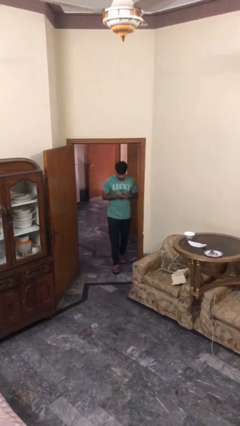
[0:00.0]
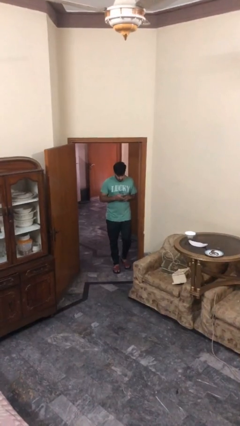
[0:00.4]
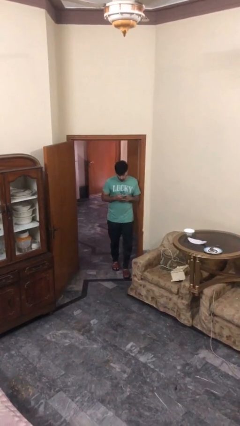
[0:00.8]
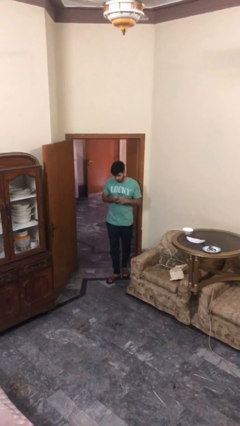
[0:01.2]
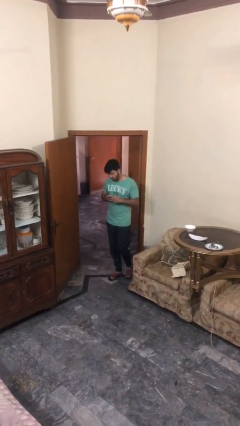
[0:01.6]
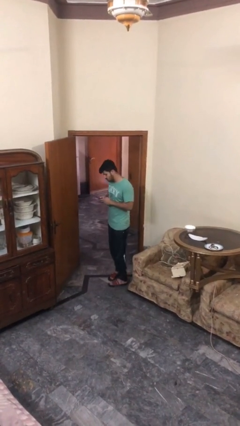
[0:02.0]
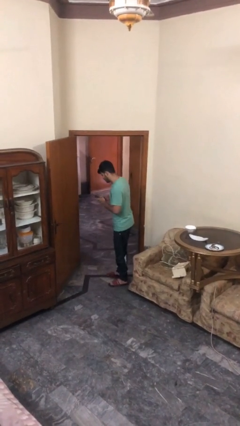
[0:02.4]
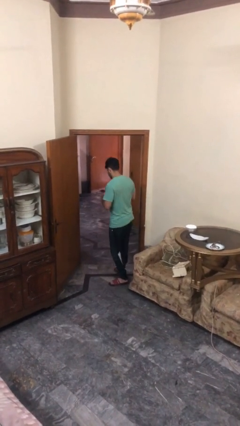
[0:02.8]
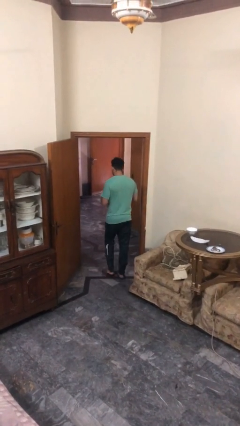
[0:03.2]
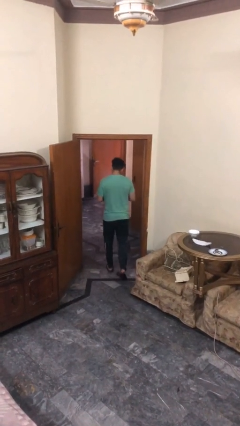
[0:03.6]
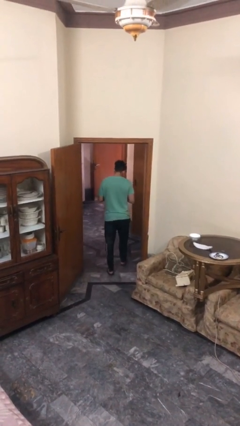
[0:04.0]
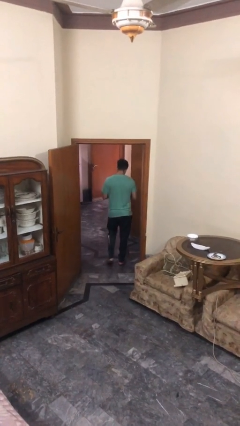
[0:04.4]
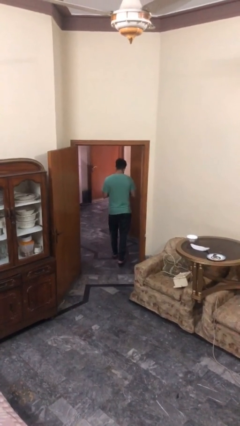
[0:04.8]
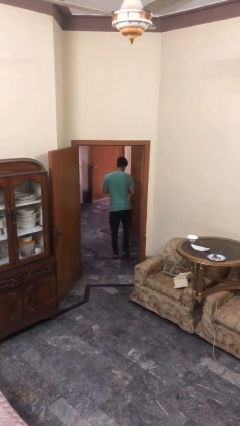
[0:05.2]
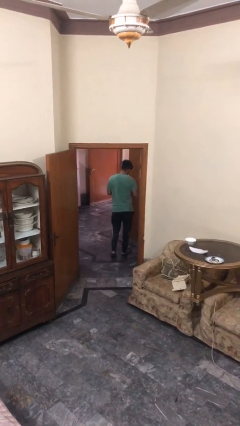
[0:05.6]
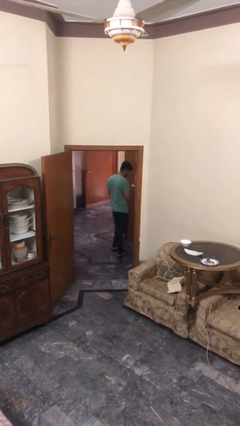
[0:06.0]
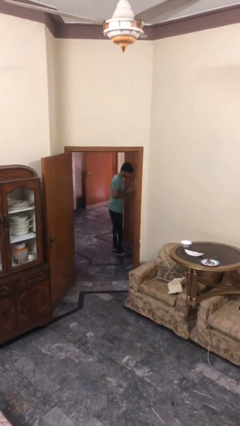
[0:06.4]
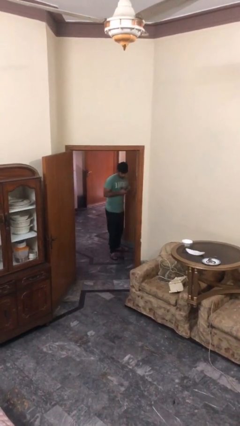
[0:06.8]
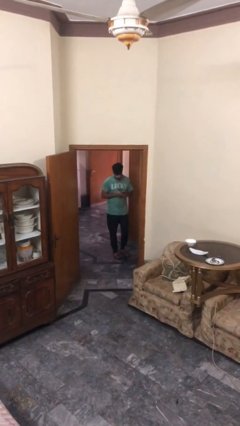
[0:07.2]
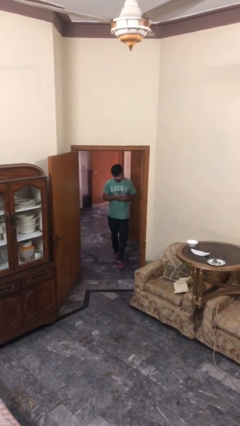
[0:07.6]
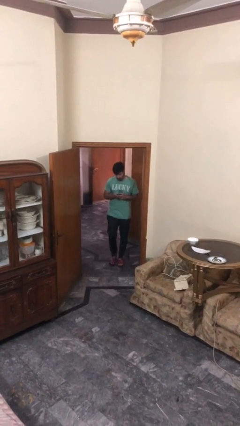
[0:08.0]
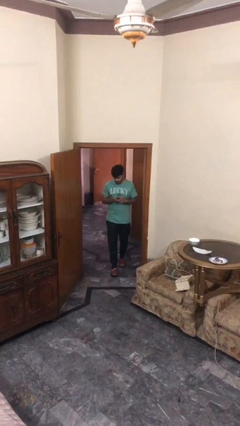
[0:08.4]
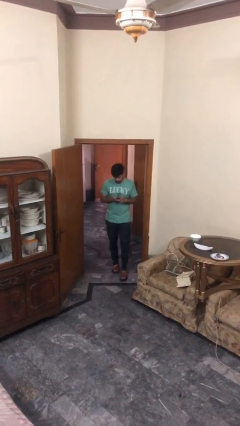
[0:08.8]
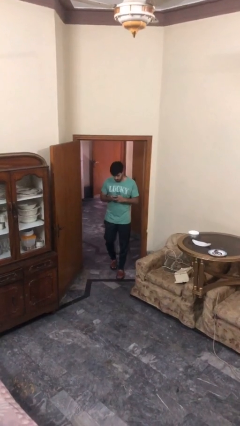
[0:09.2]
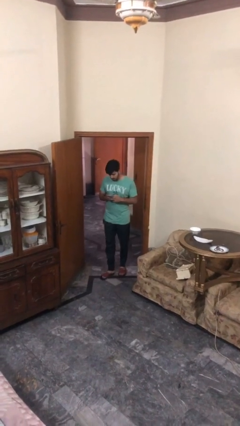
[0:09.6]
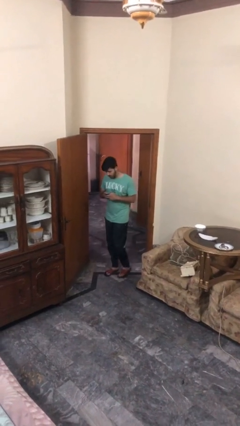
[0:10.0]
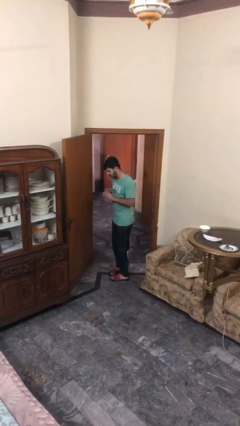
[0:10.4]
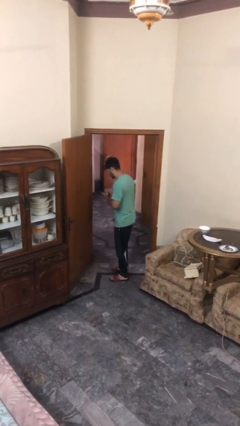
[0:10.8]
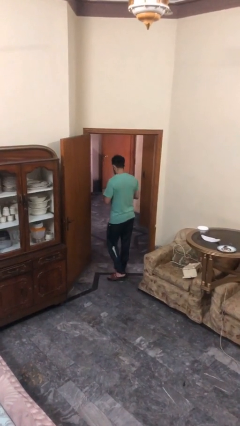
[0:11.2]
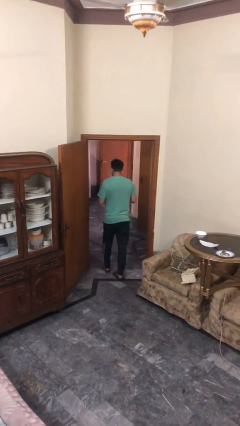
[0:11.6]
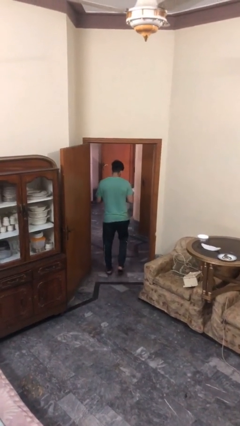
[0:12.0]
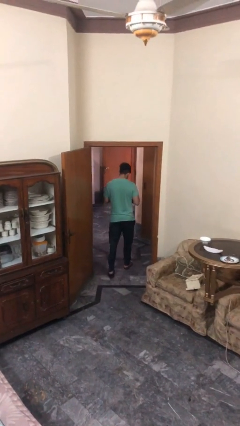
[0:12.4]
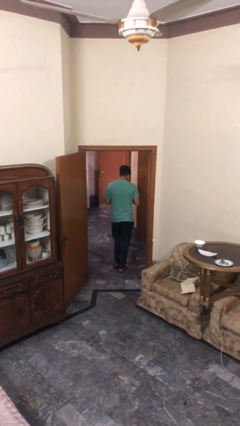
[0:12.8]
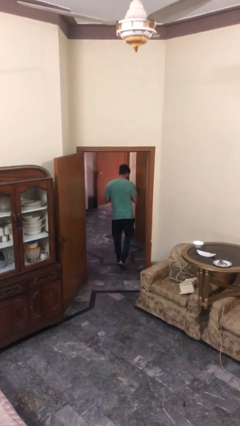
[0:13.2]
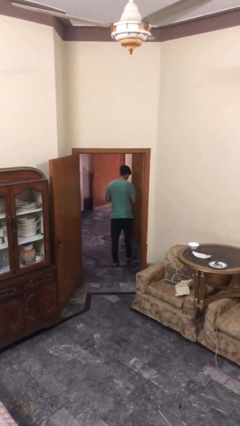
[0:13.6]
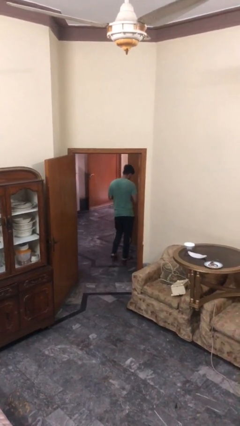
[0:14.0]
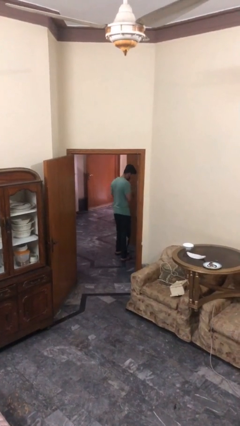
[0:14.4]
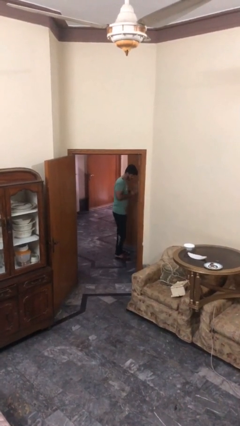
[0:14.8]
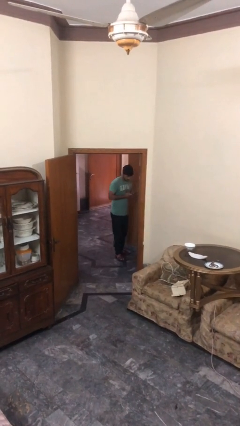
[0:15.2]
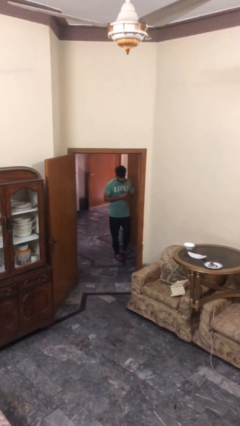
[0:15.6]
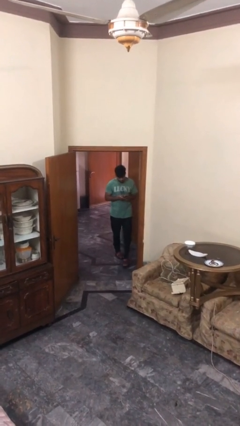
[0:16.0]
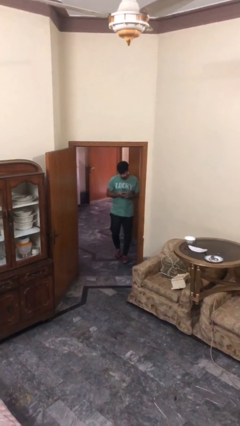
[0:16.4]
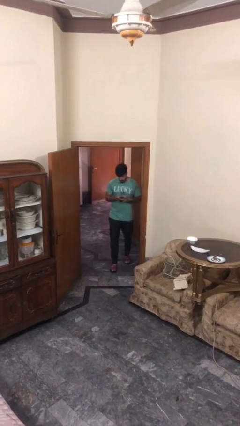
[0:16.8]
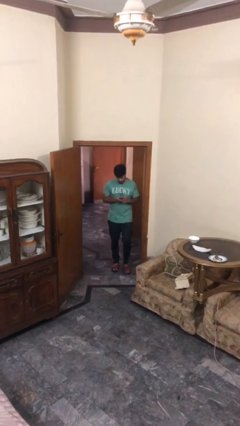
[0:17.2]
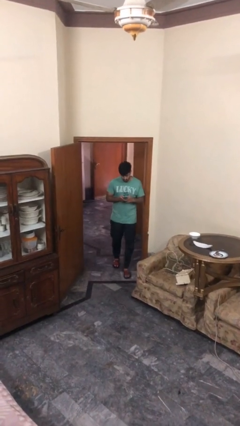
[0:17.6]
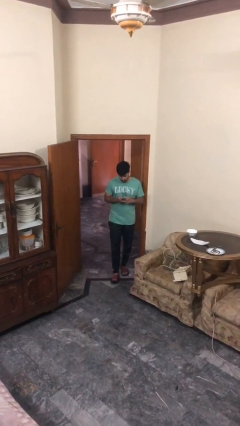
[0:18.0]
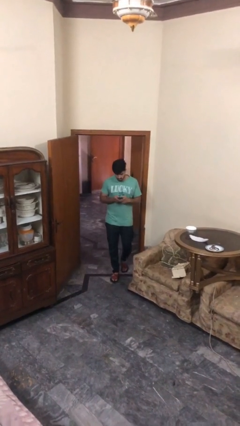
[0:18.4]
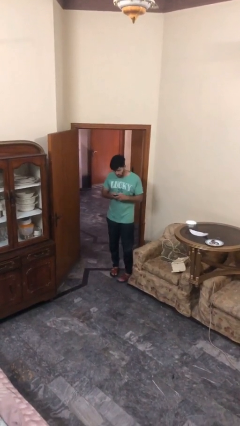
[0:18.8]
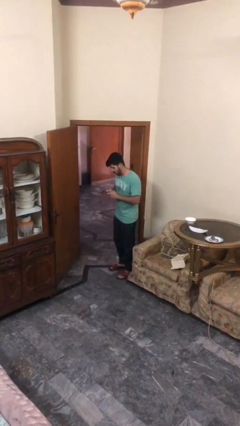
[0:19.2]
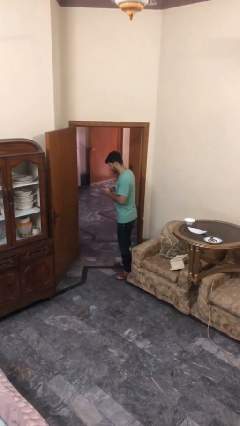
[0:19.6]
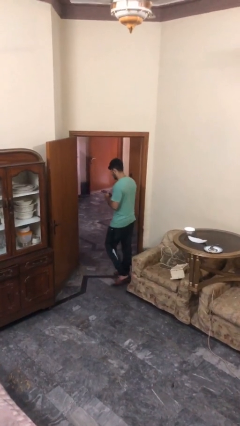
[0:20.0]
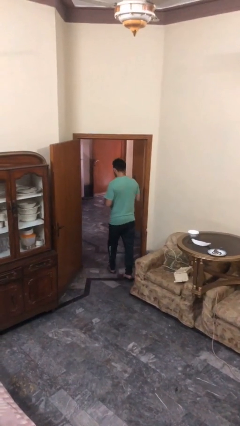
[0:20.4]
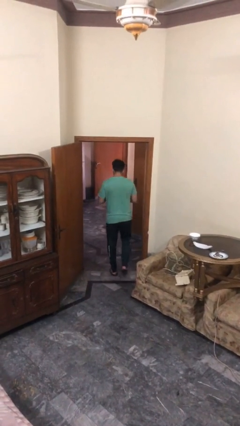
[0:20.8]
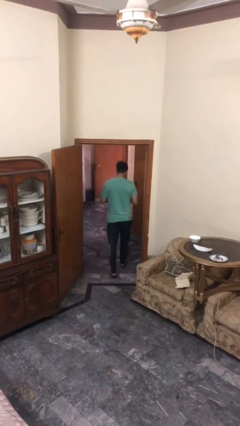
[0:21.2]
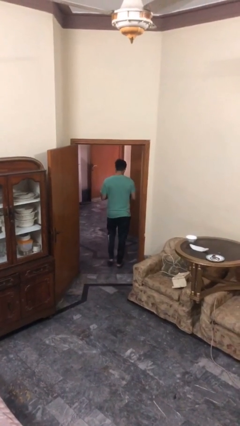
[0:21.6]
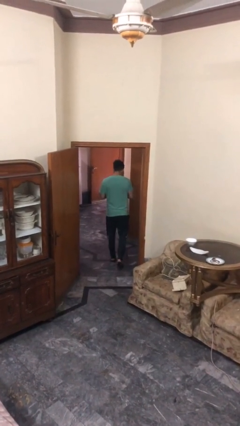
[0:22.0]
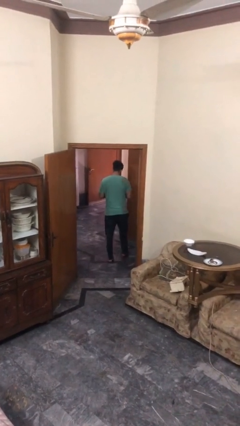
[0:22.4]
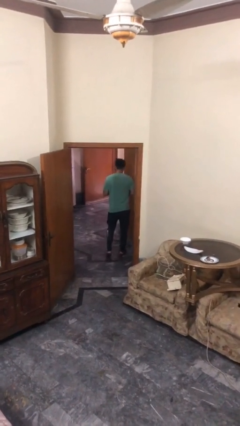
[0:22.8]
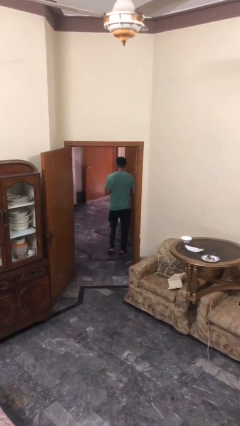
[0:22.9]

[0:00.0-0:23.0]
person texts on phone

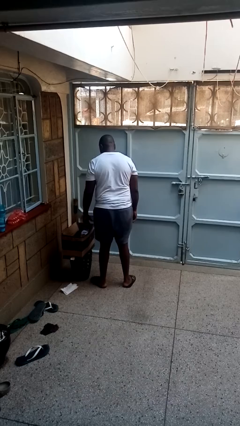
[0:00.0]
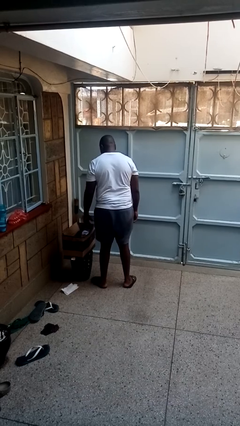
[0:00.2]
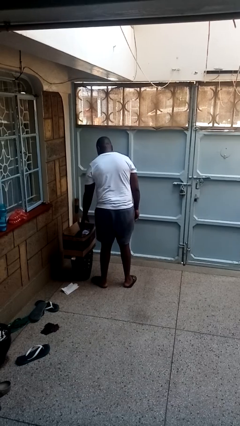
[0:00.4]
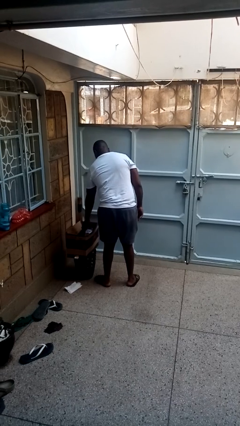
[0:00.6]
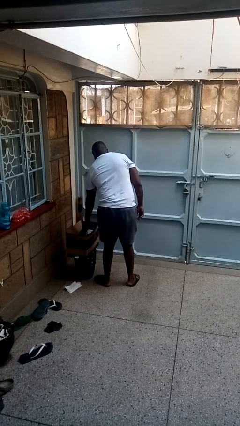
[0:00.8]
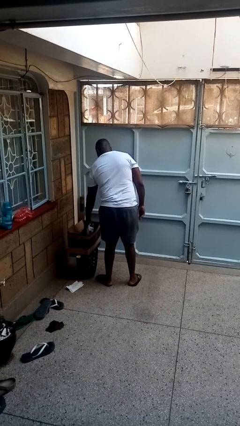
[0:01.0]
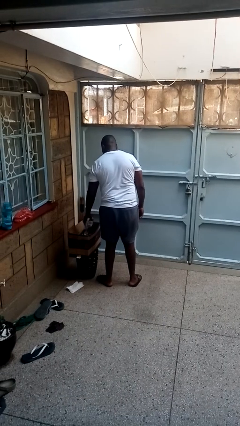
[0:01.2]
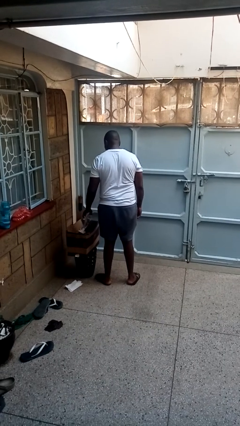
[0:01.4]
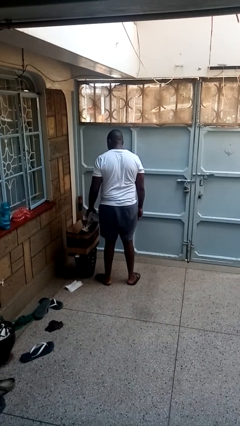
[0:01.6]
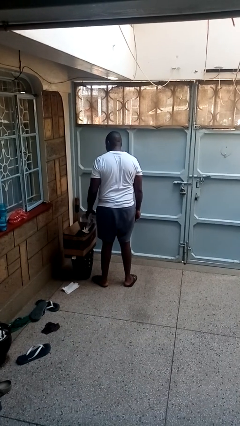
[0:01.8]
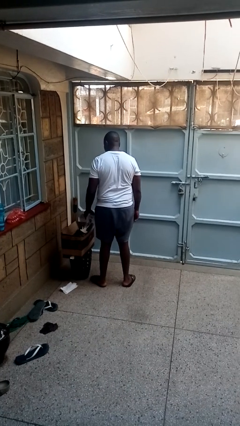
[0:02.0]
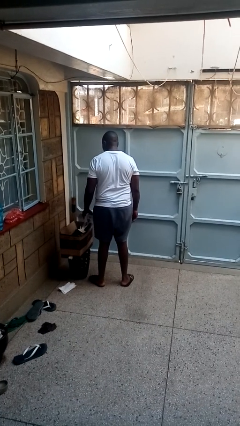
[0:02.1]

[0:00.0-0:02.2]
person takes object from box

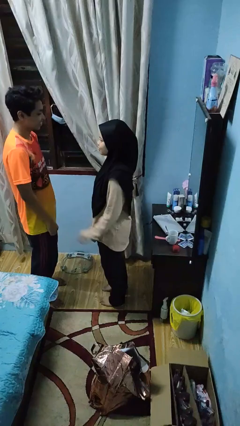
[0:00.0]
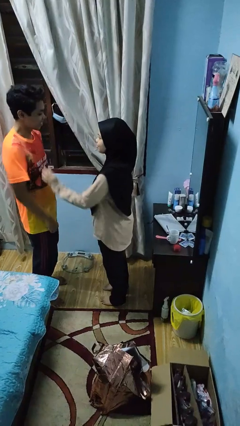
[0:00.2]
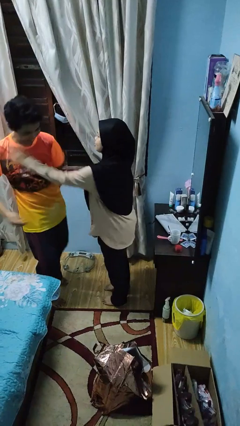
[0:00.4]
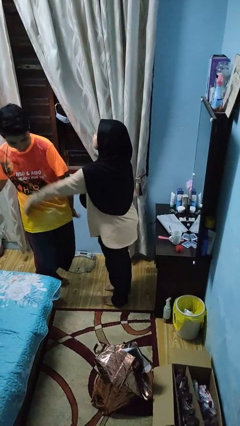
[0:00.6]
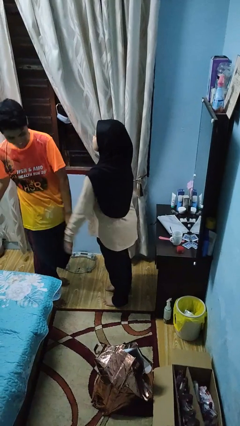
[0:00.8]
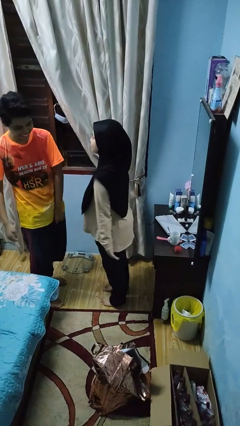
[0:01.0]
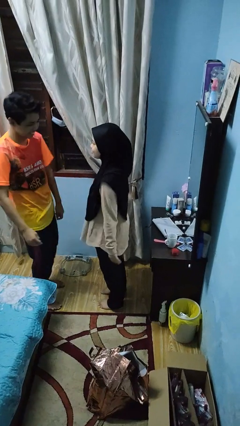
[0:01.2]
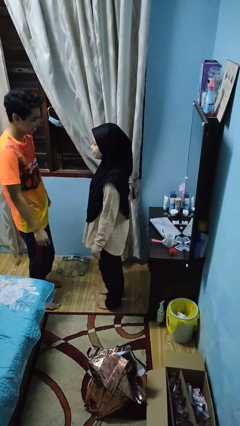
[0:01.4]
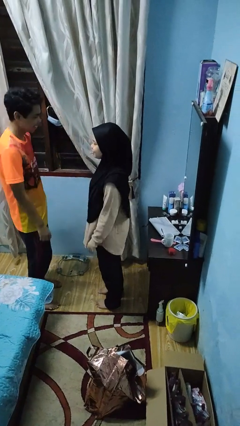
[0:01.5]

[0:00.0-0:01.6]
person shoves person

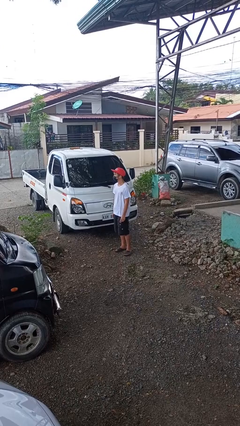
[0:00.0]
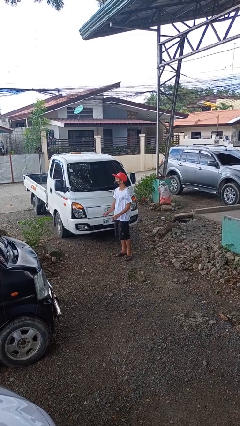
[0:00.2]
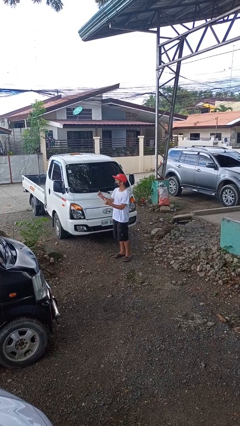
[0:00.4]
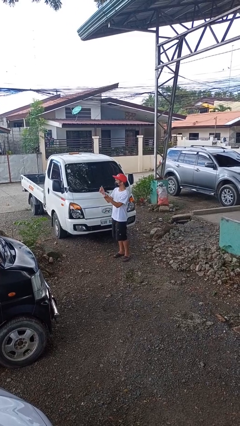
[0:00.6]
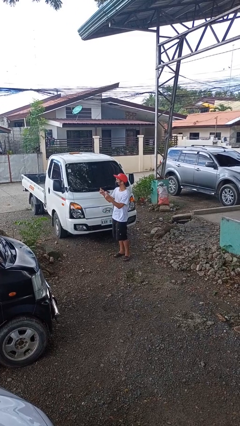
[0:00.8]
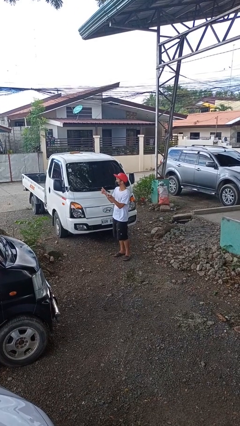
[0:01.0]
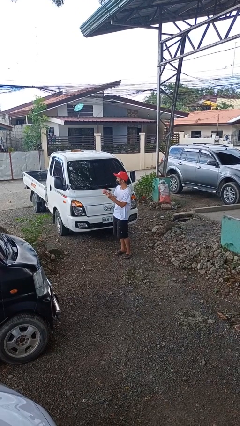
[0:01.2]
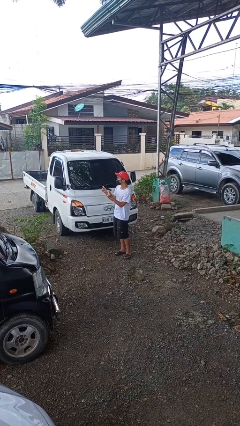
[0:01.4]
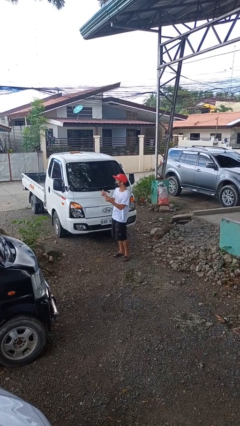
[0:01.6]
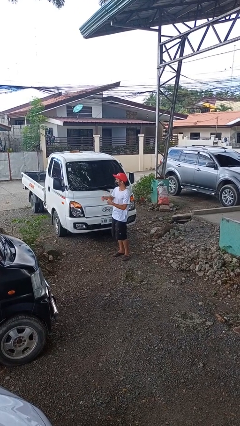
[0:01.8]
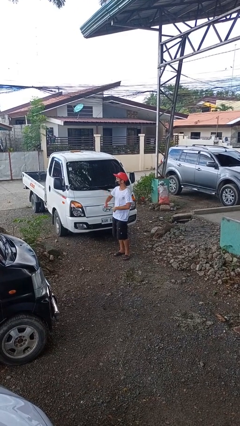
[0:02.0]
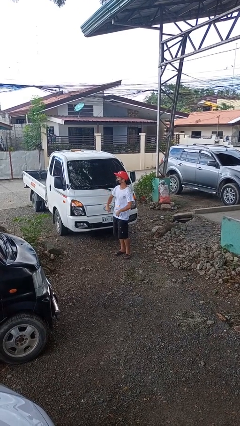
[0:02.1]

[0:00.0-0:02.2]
person snaps fingers

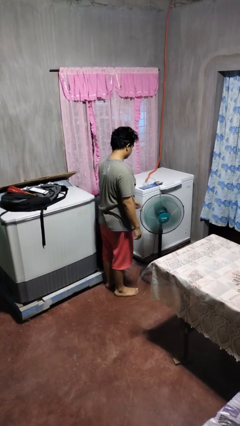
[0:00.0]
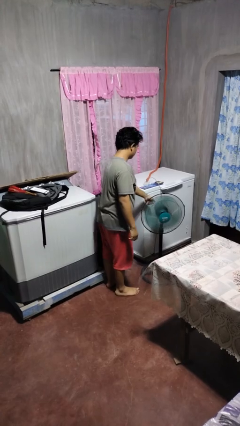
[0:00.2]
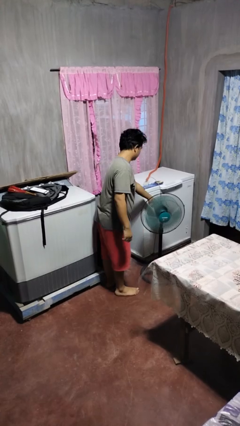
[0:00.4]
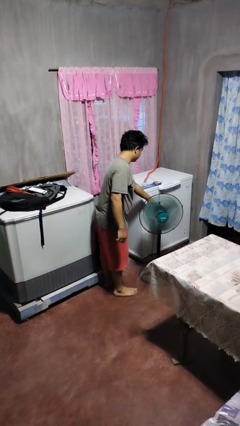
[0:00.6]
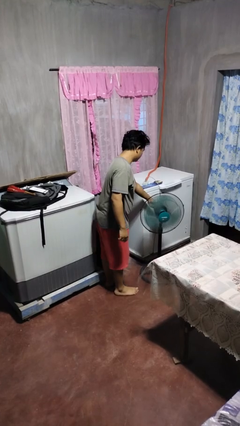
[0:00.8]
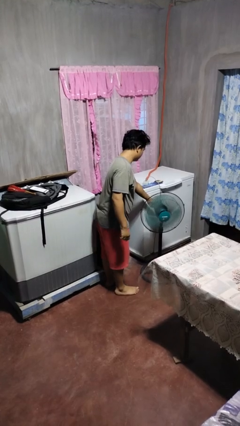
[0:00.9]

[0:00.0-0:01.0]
person turns on fan
